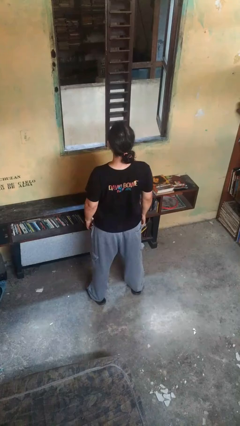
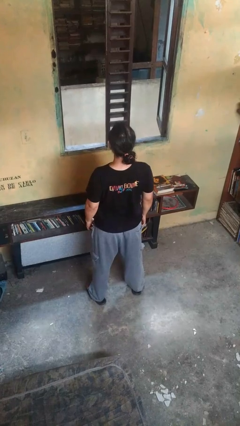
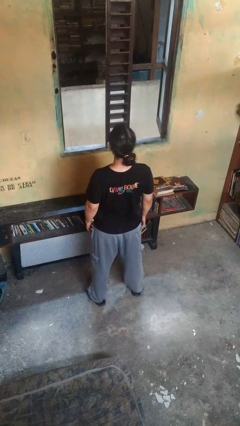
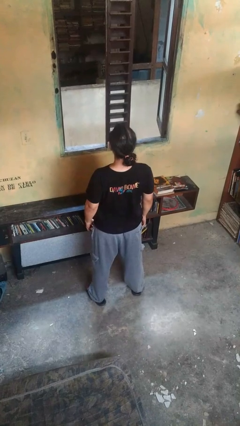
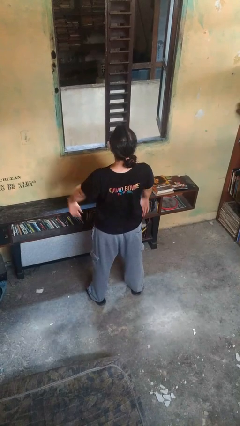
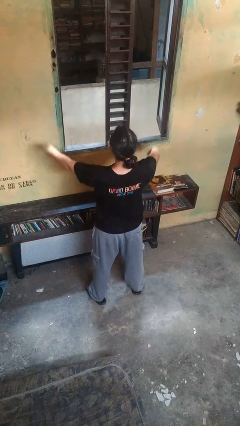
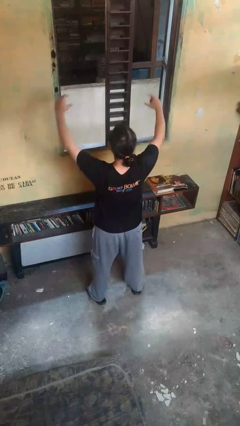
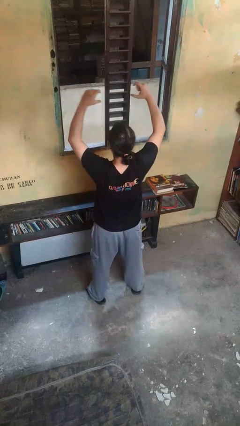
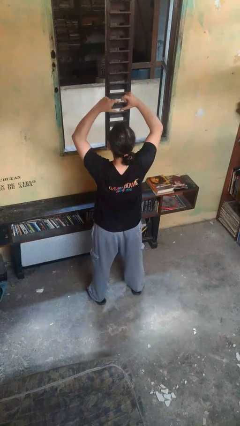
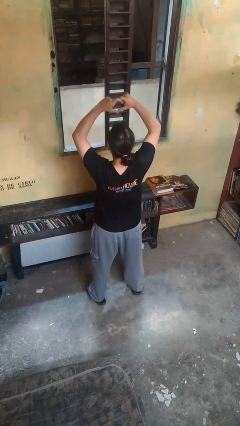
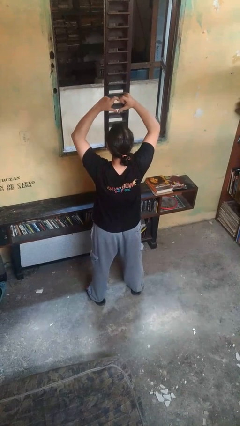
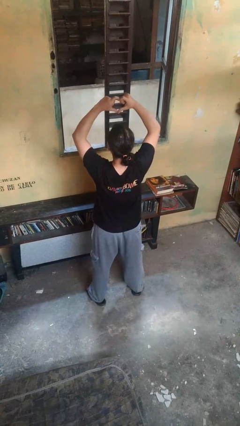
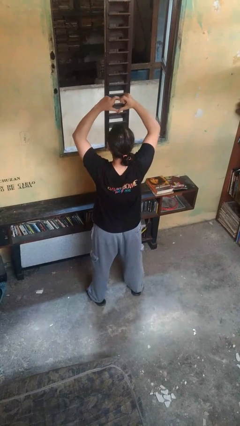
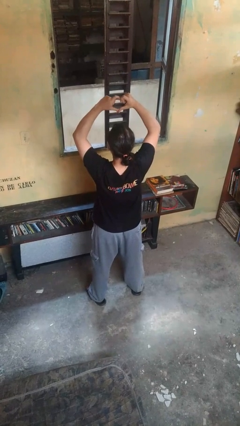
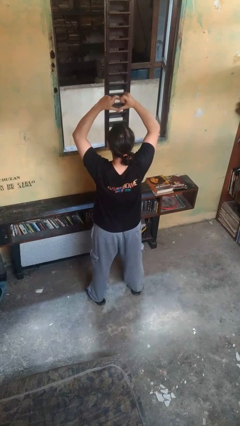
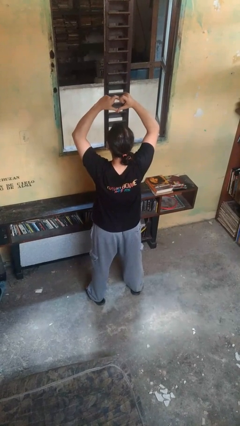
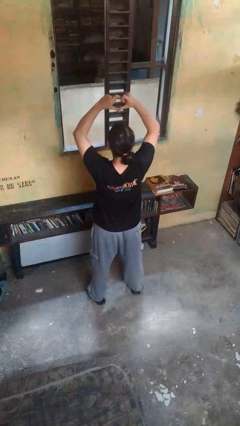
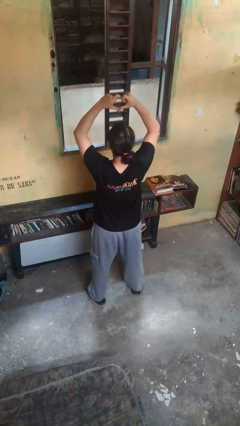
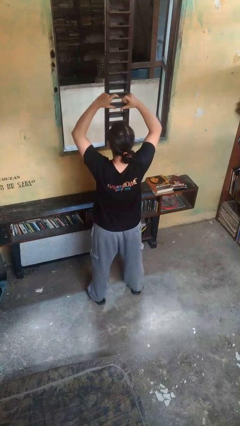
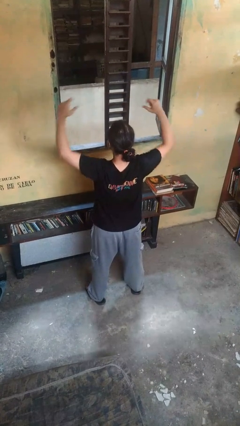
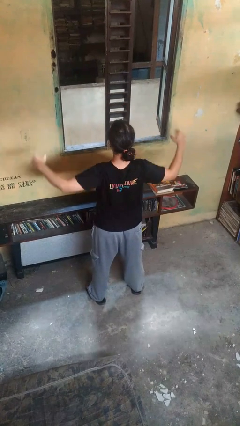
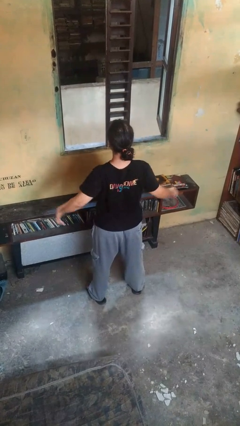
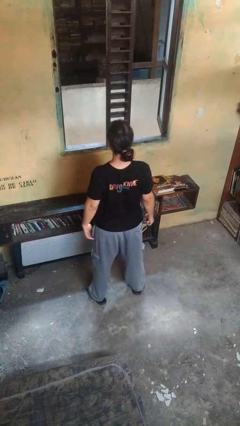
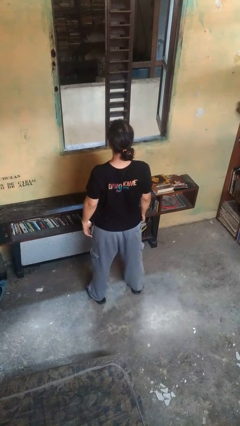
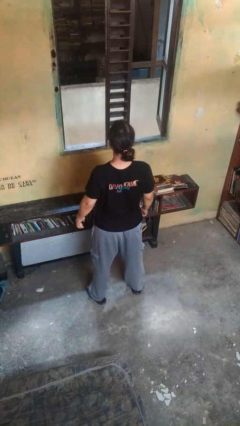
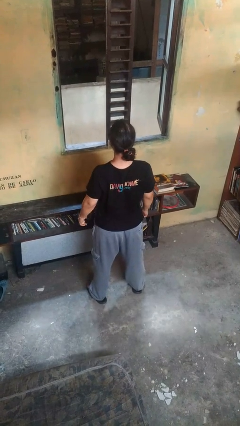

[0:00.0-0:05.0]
person gestures heart

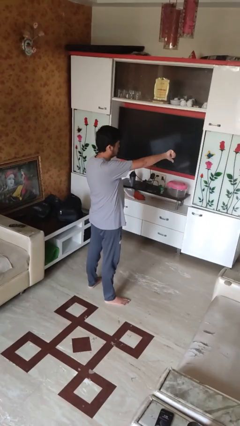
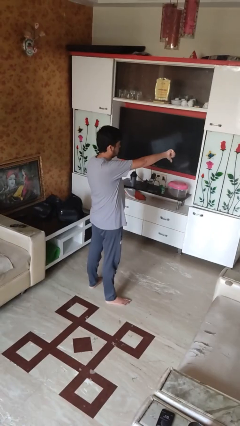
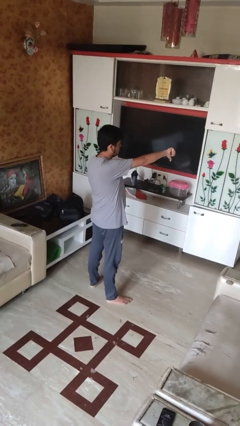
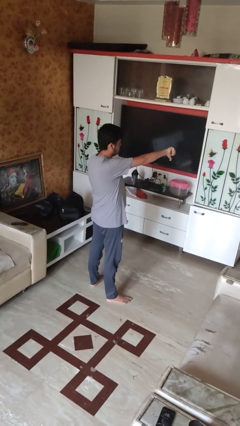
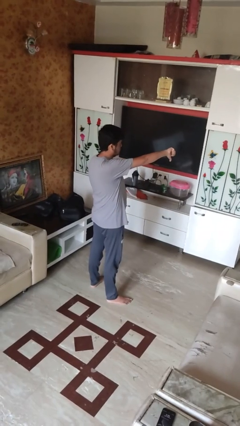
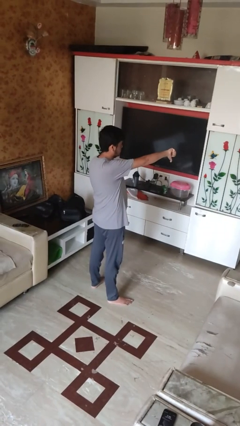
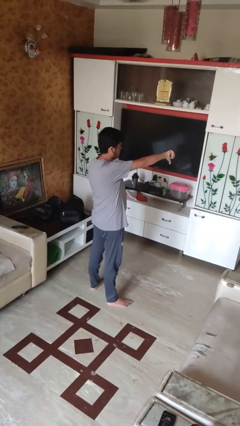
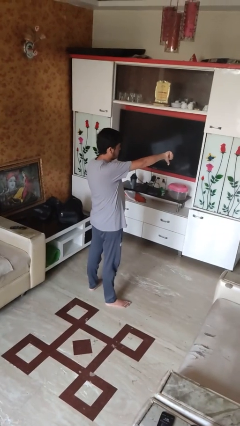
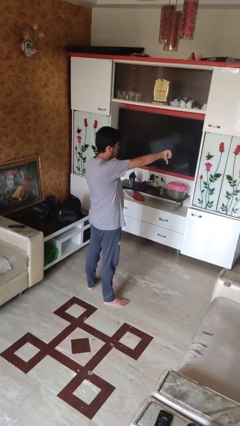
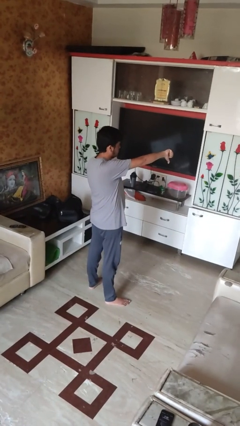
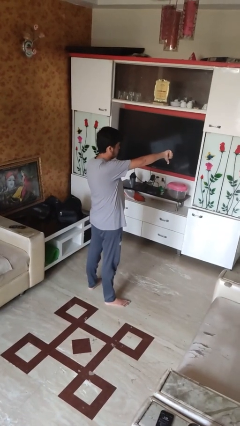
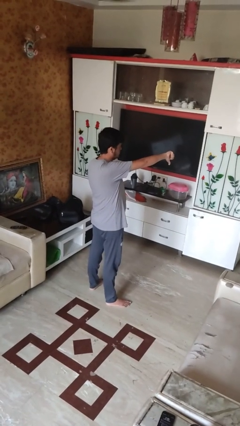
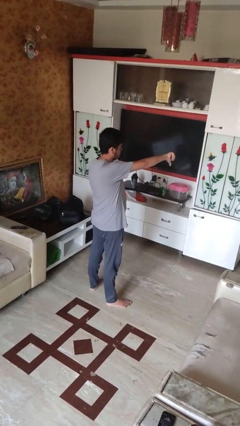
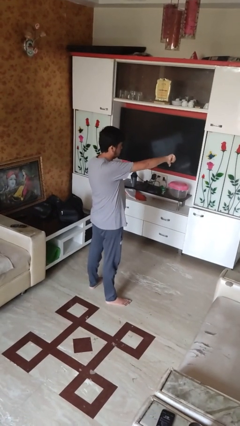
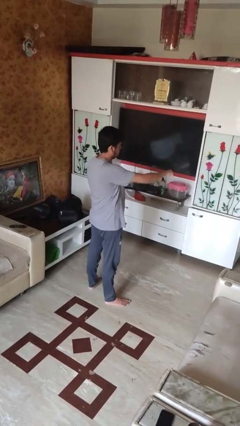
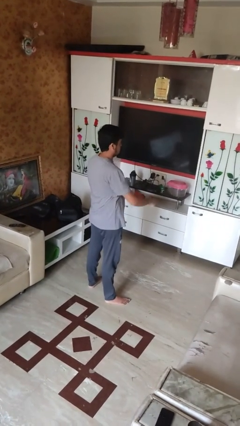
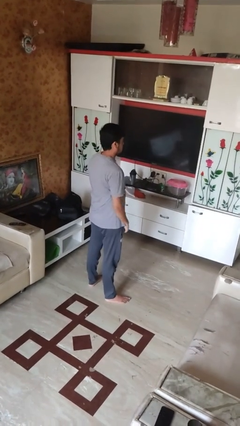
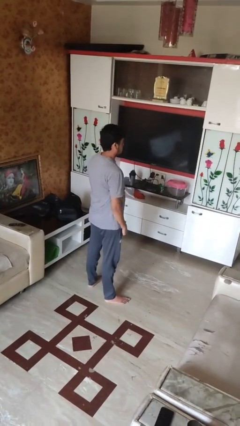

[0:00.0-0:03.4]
person gestures thumbs down

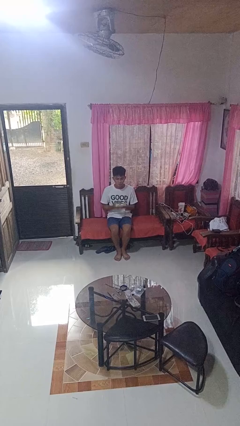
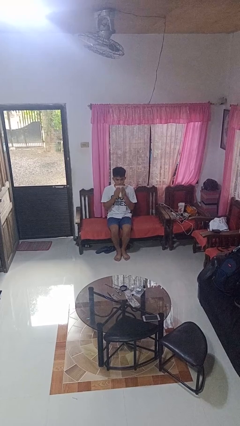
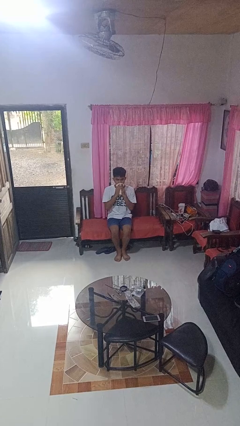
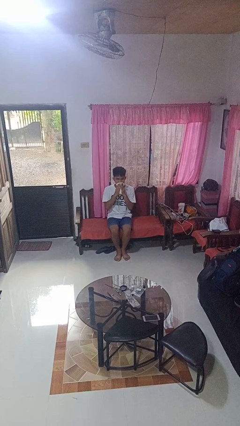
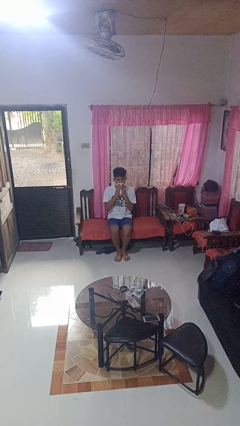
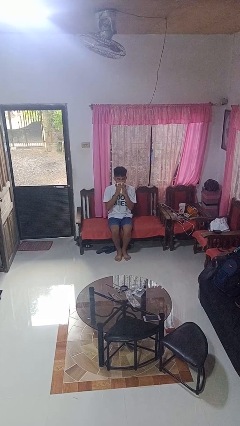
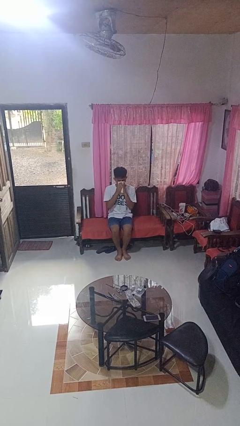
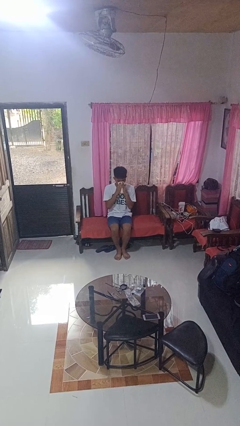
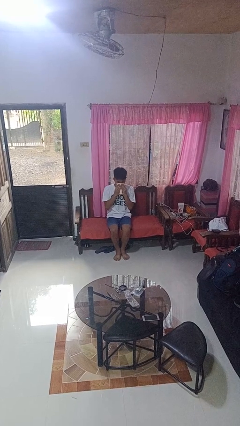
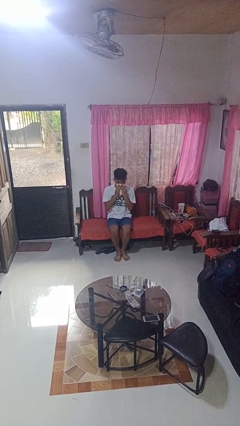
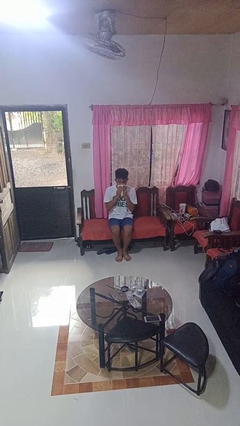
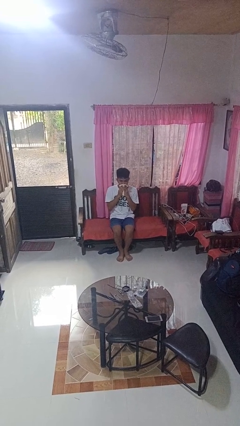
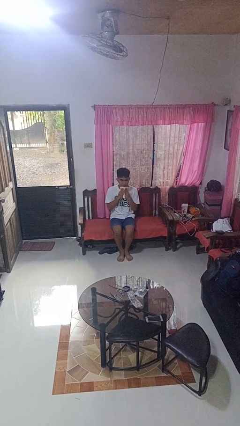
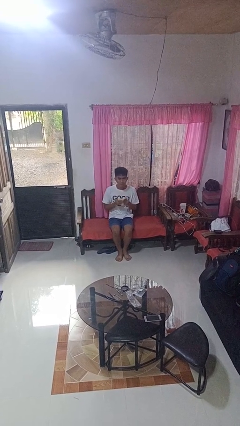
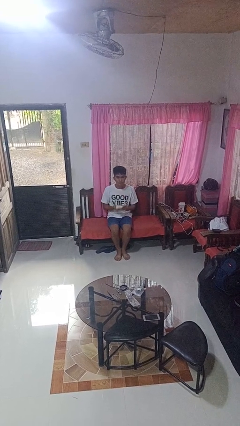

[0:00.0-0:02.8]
person wipes mouth with napkin

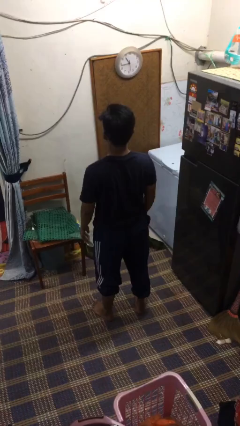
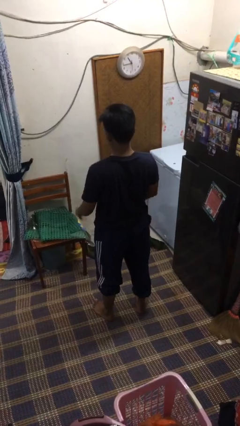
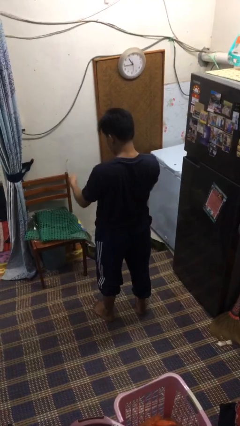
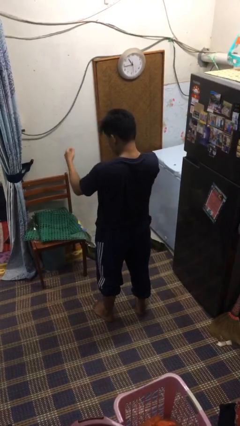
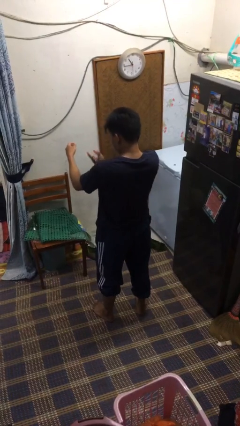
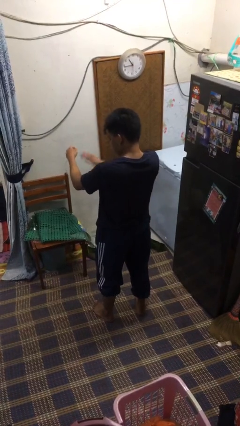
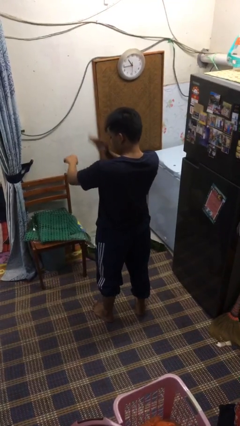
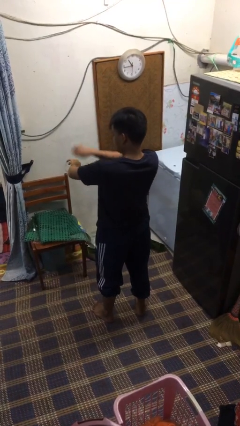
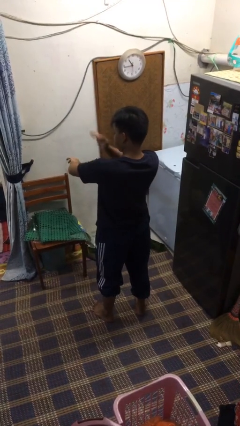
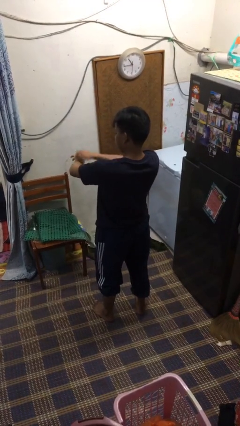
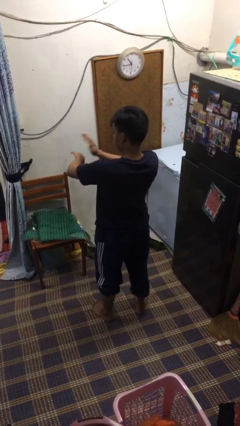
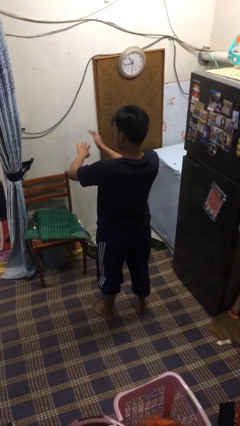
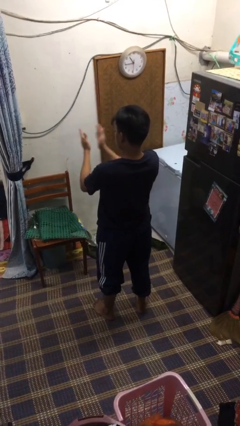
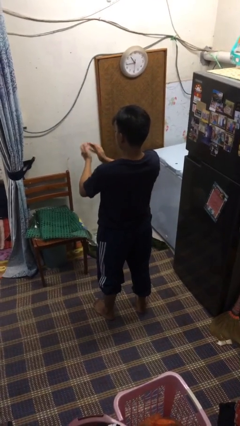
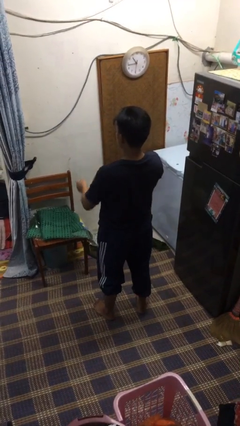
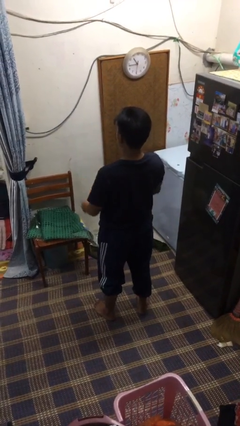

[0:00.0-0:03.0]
person swats bug

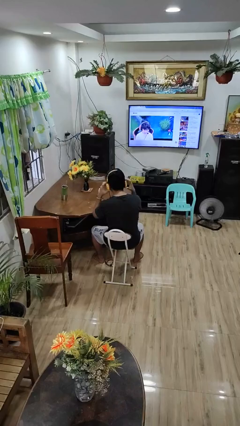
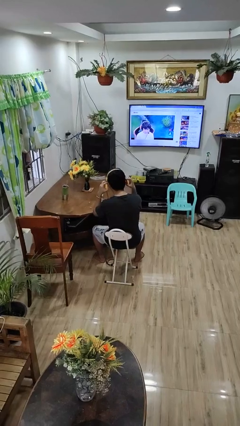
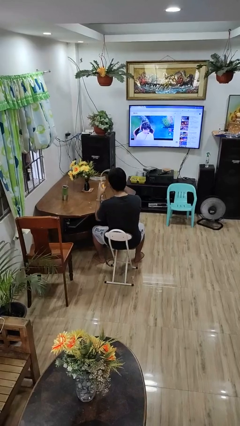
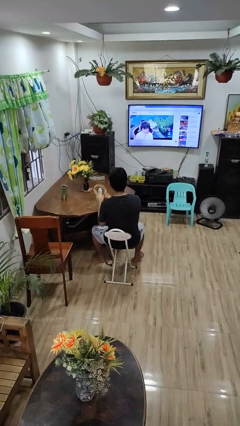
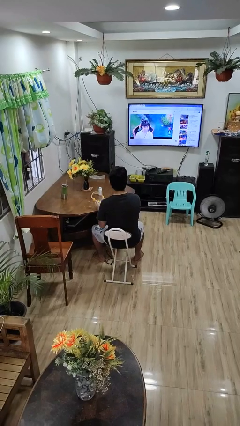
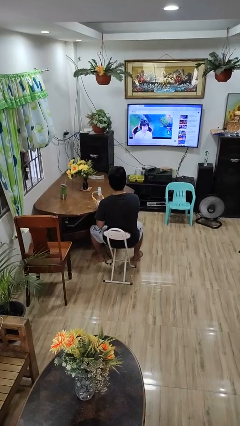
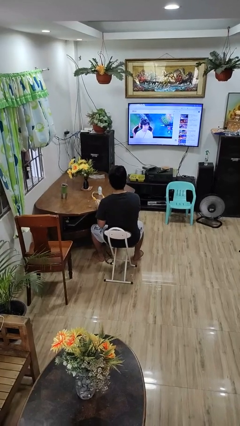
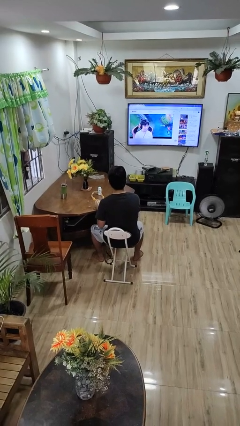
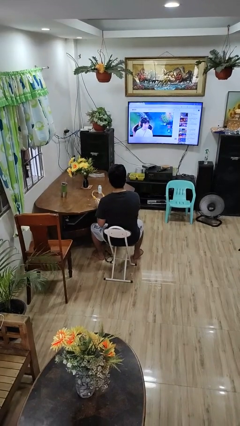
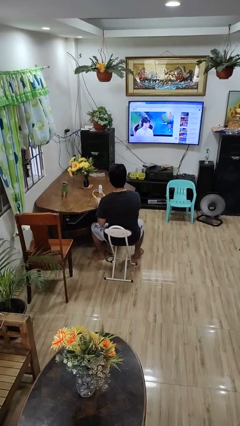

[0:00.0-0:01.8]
person takes off headphones

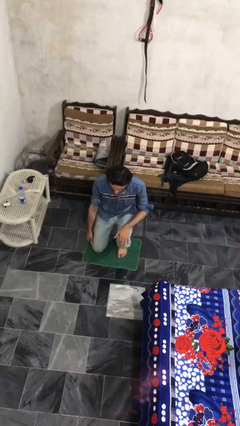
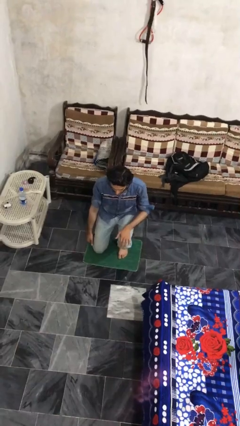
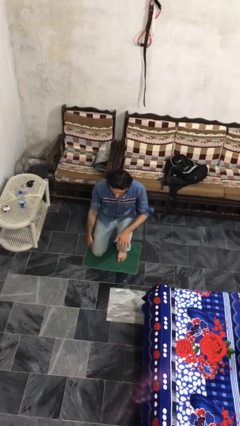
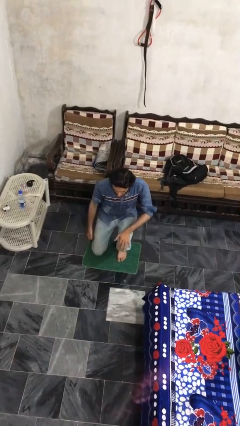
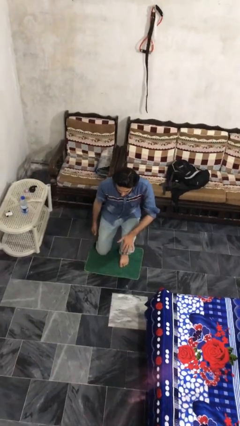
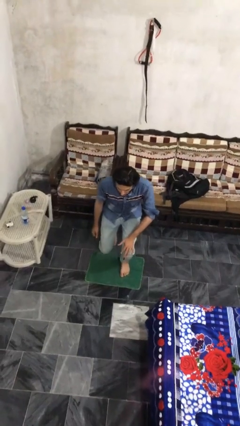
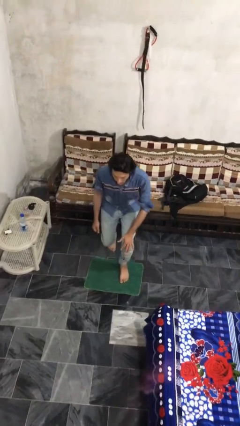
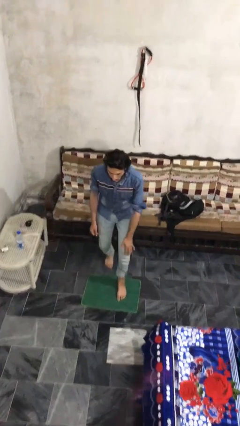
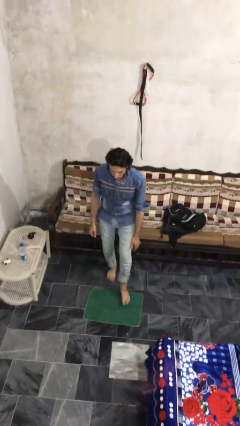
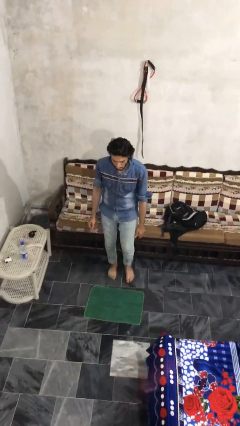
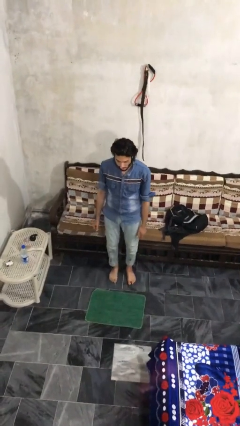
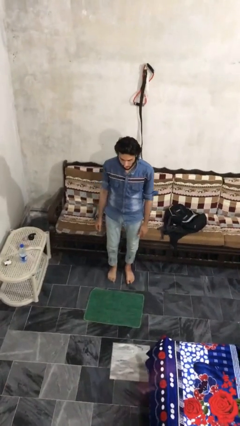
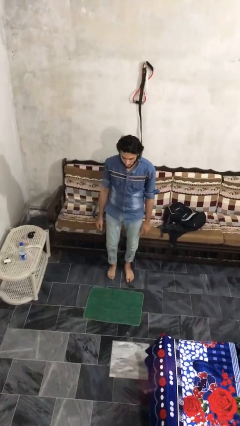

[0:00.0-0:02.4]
person stands up from floor
